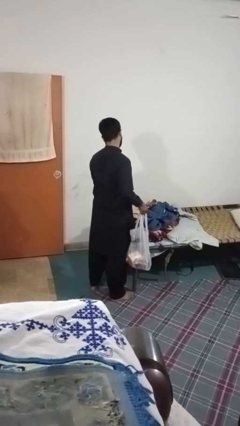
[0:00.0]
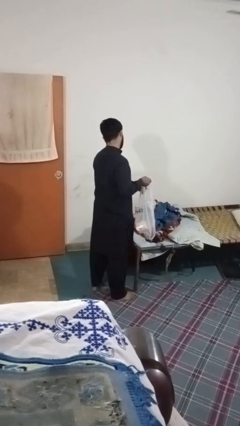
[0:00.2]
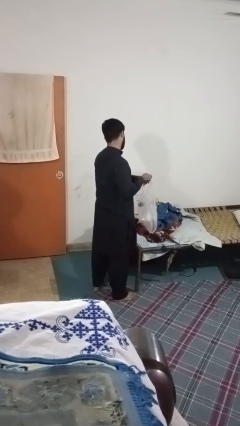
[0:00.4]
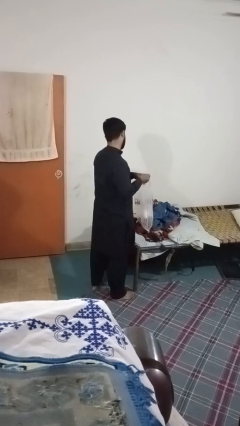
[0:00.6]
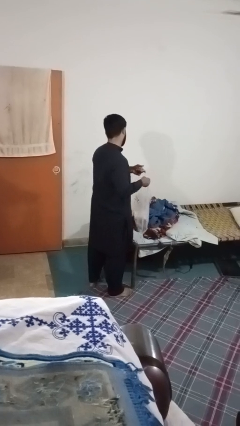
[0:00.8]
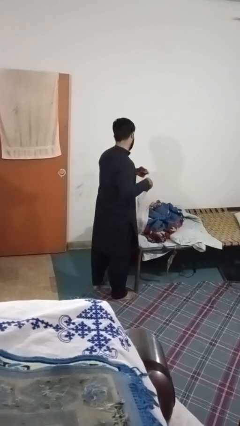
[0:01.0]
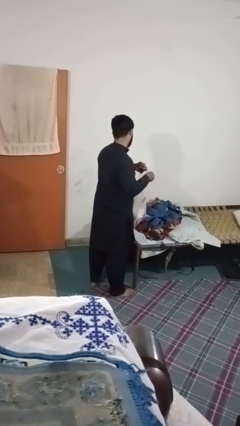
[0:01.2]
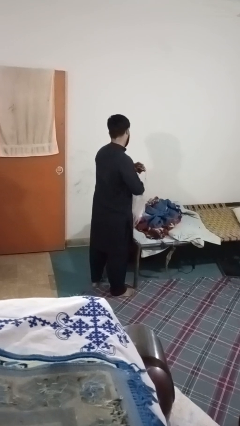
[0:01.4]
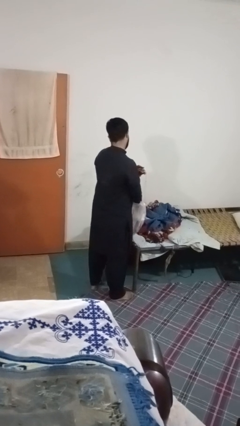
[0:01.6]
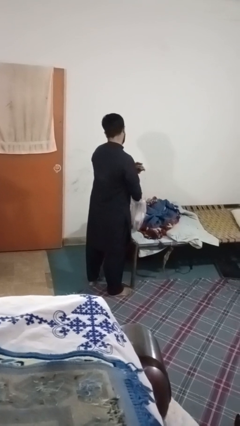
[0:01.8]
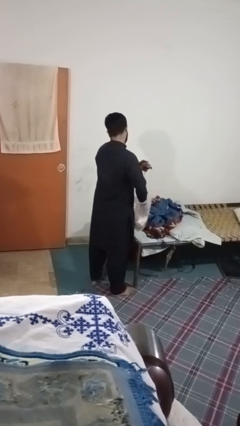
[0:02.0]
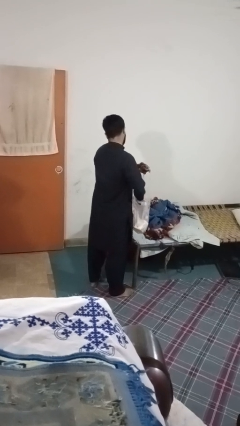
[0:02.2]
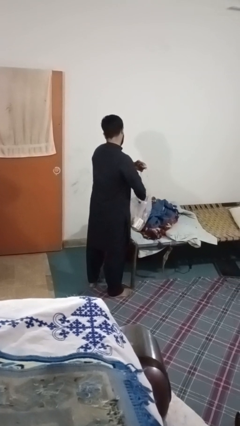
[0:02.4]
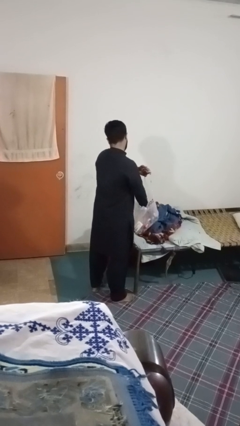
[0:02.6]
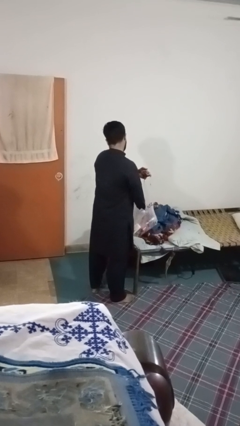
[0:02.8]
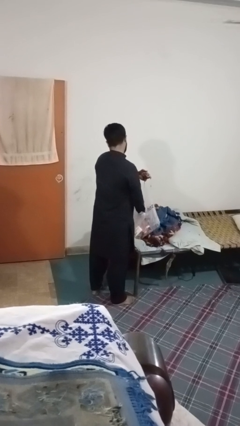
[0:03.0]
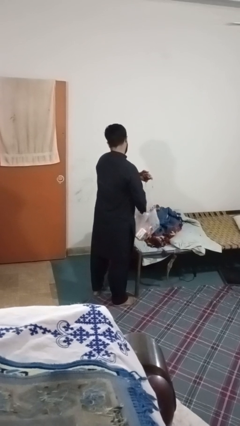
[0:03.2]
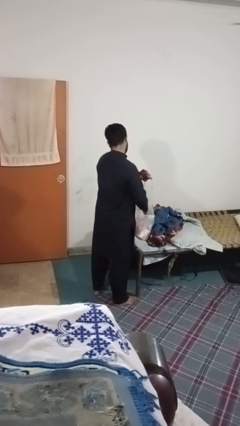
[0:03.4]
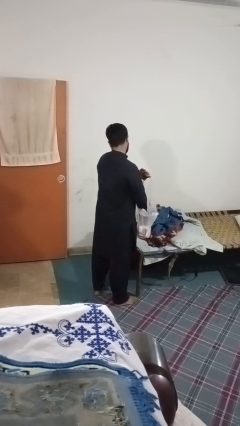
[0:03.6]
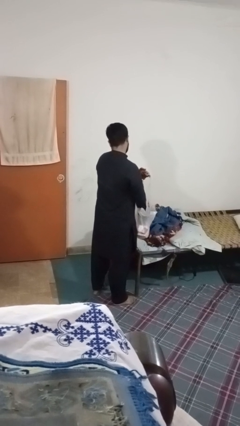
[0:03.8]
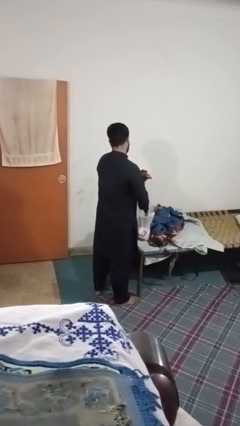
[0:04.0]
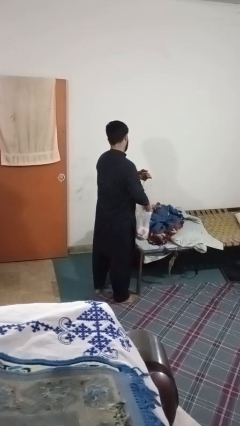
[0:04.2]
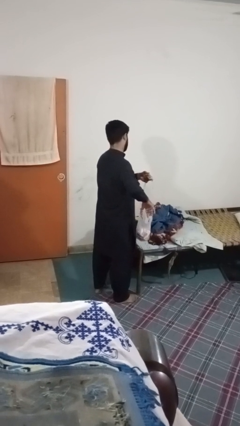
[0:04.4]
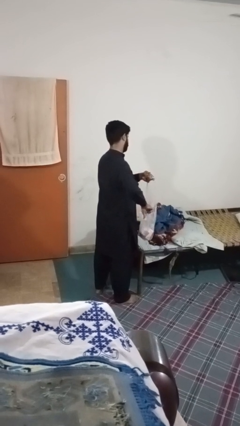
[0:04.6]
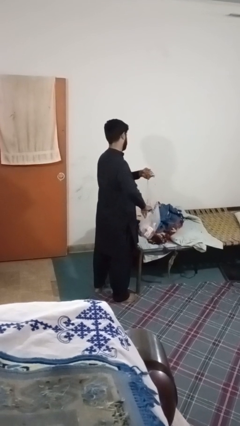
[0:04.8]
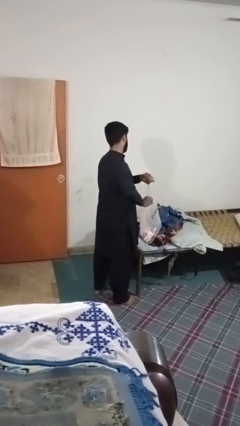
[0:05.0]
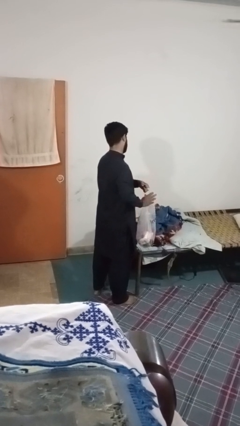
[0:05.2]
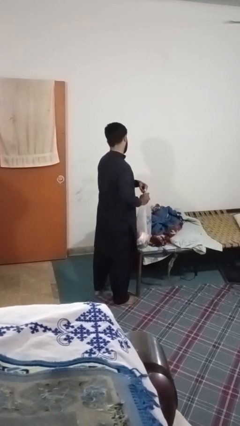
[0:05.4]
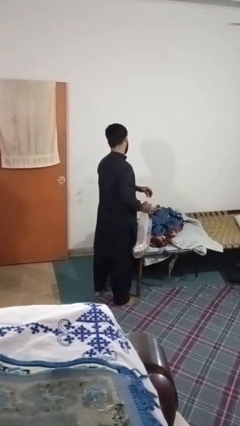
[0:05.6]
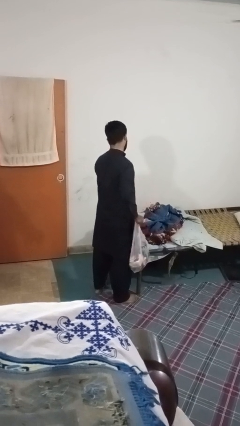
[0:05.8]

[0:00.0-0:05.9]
person searches in bag

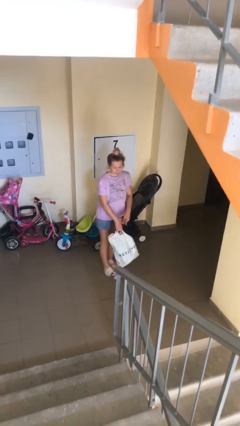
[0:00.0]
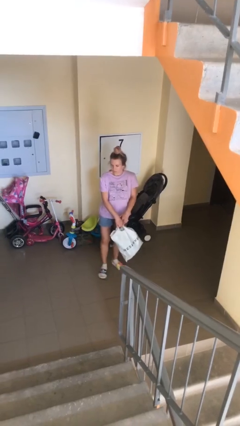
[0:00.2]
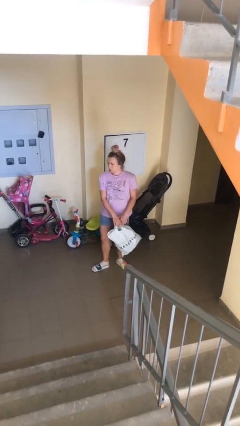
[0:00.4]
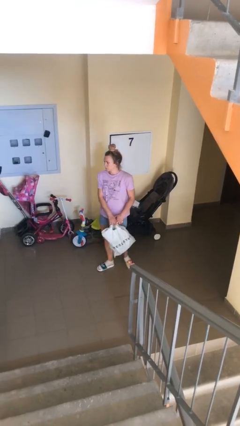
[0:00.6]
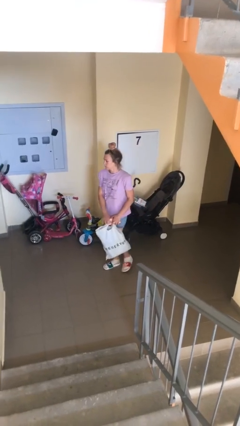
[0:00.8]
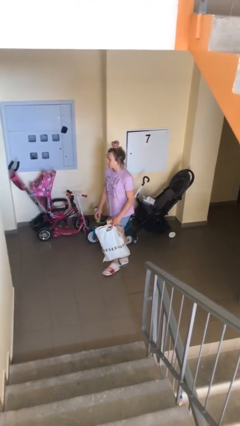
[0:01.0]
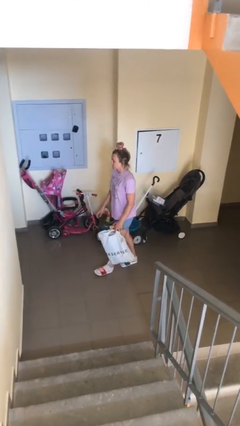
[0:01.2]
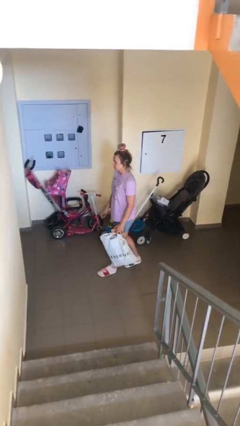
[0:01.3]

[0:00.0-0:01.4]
person carries groceries

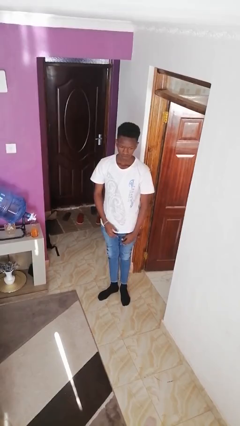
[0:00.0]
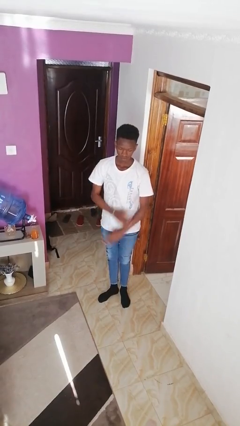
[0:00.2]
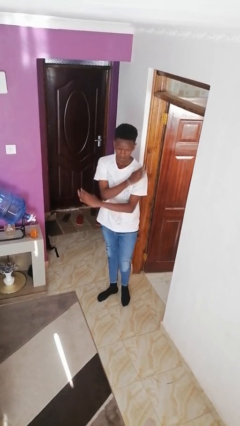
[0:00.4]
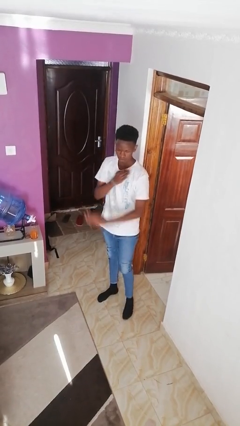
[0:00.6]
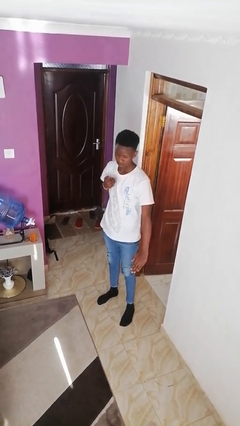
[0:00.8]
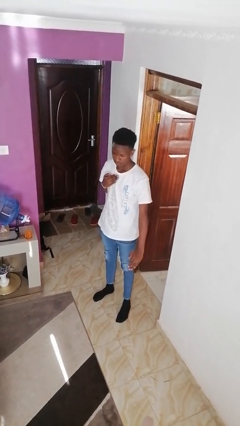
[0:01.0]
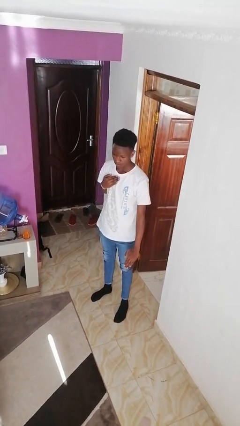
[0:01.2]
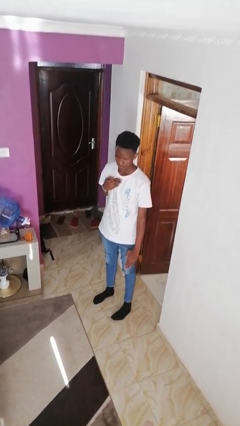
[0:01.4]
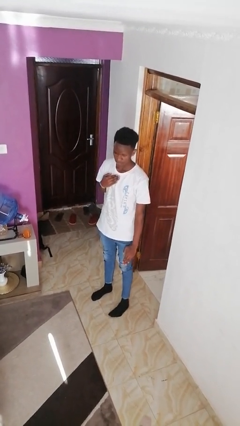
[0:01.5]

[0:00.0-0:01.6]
person karate chop

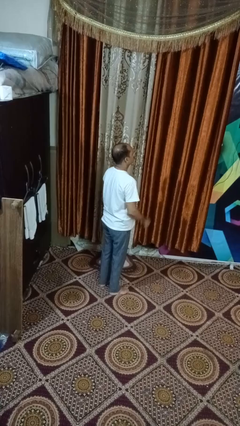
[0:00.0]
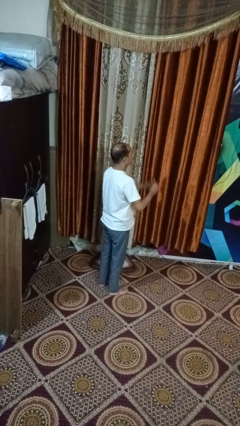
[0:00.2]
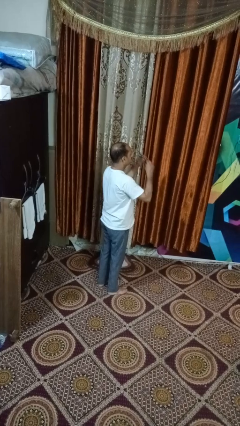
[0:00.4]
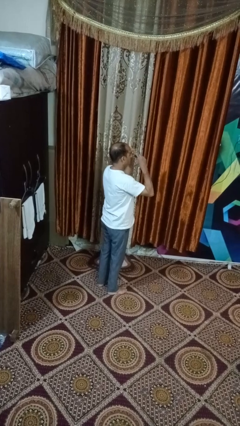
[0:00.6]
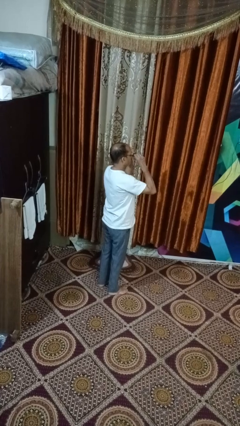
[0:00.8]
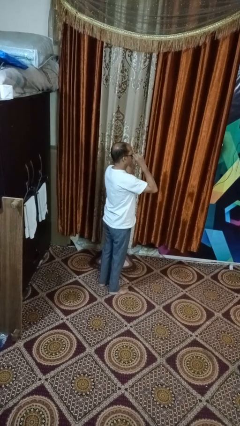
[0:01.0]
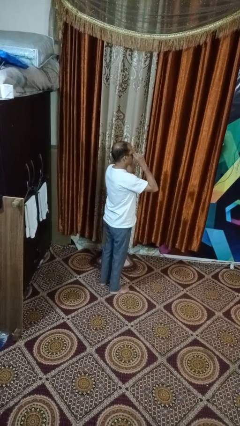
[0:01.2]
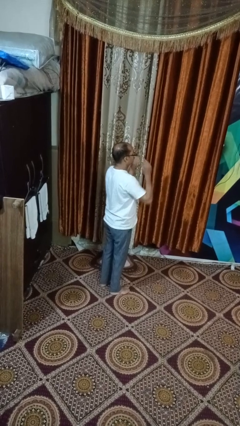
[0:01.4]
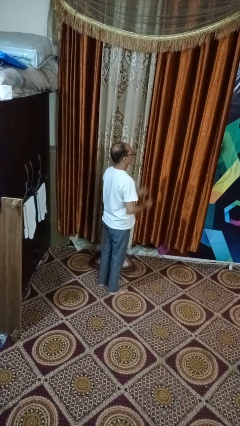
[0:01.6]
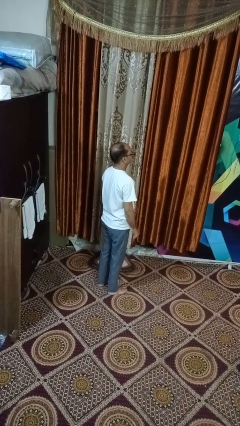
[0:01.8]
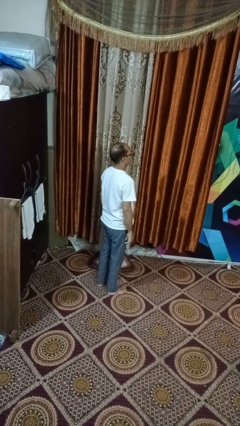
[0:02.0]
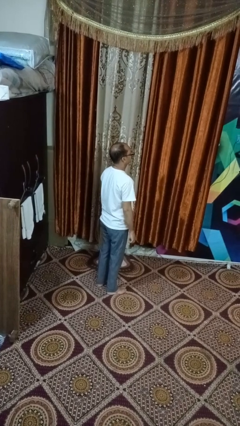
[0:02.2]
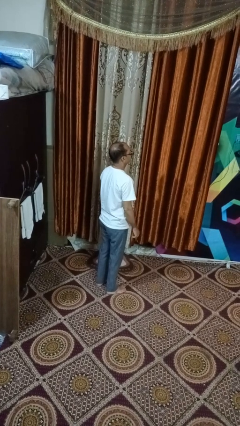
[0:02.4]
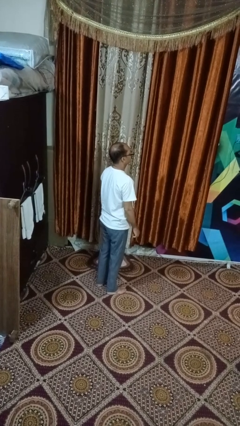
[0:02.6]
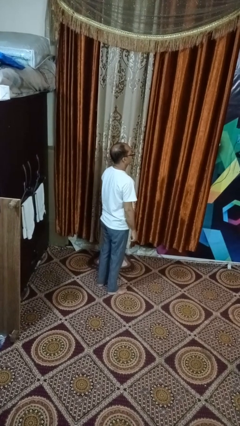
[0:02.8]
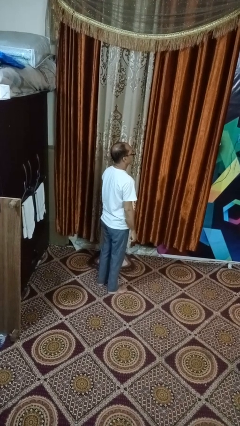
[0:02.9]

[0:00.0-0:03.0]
person puts on glasses

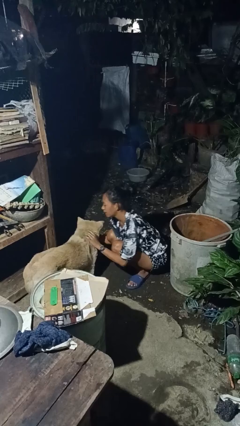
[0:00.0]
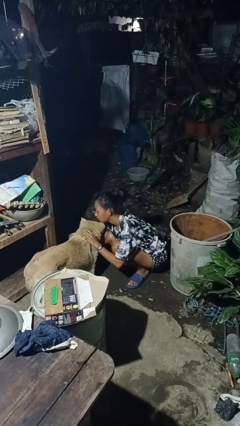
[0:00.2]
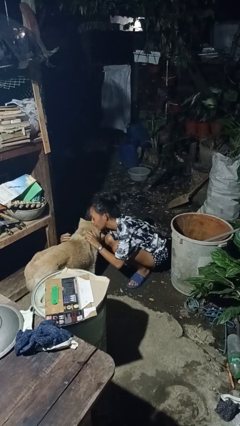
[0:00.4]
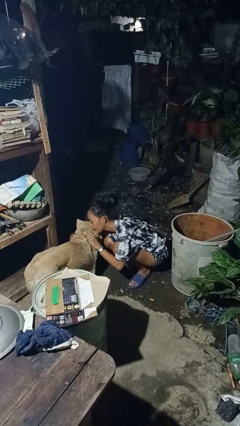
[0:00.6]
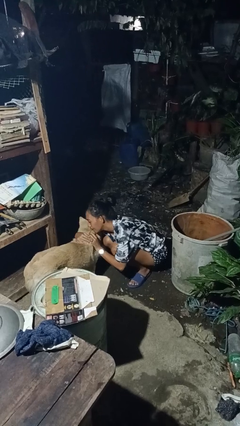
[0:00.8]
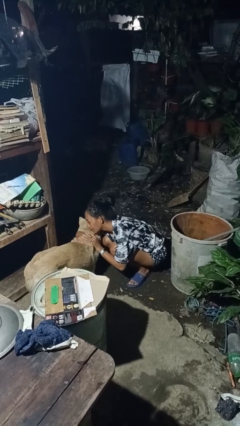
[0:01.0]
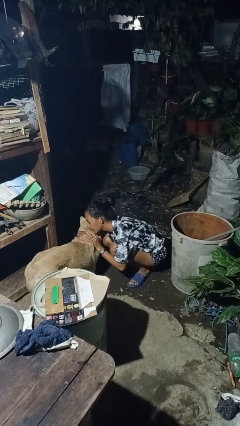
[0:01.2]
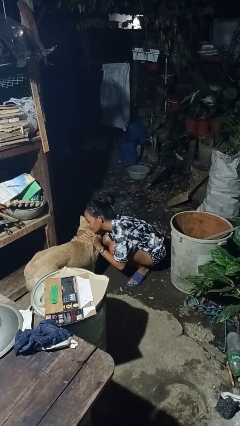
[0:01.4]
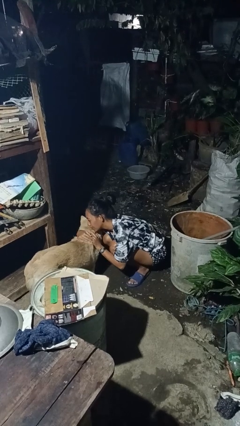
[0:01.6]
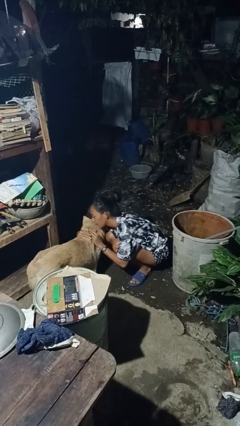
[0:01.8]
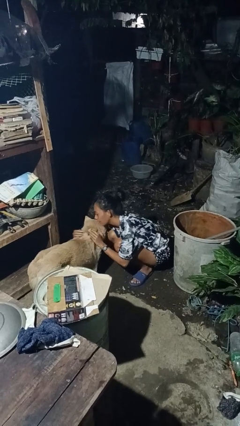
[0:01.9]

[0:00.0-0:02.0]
person hugs dog

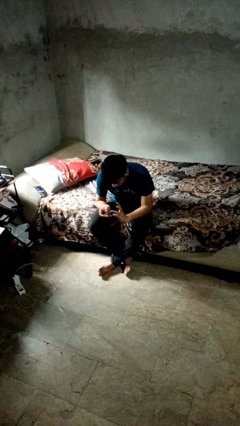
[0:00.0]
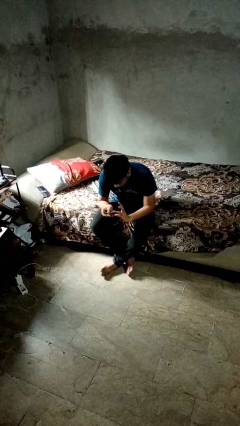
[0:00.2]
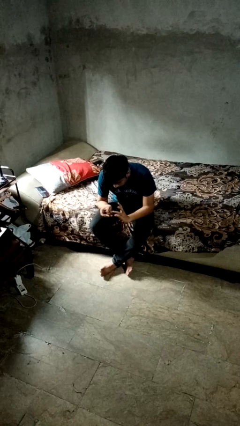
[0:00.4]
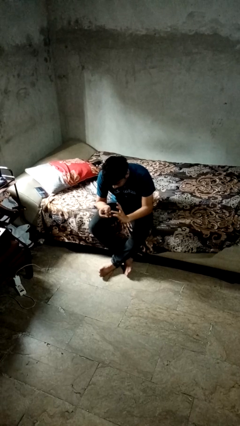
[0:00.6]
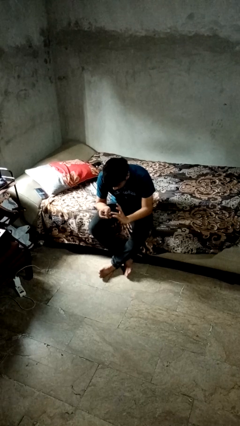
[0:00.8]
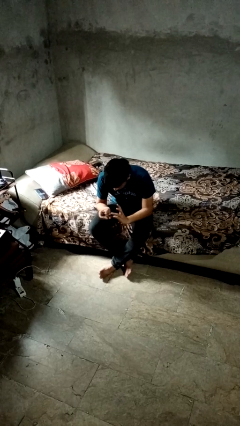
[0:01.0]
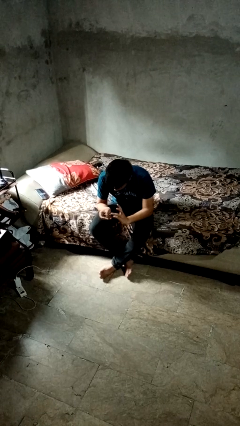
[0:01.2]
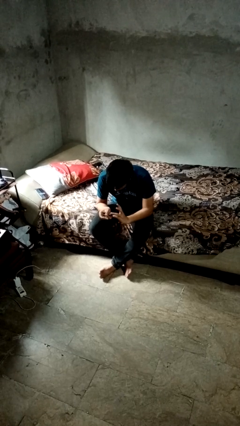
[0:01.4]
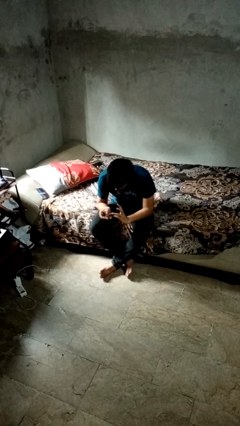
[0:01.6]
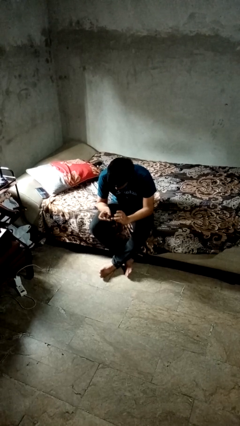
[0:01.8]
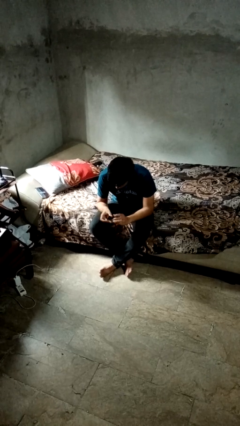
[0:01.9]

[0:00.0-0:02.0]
person clips fingernails

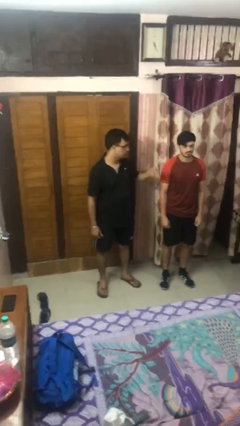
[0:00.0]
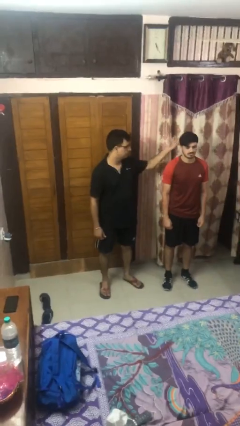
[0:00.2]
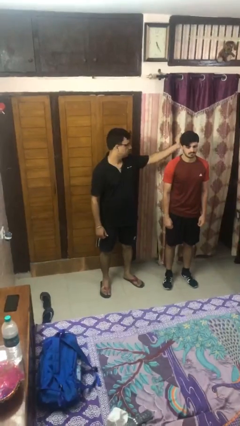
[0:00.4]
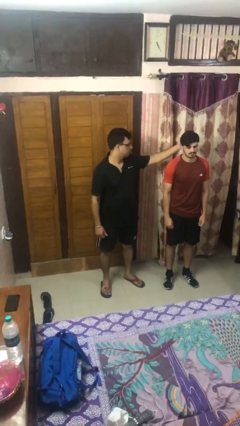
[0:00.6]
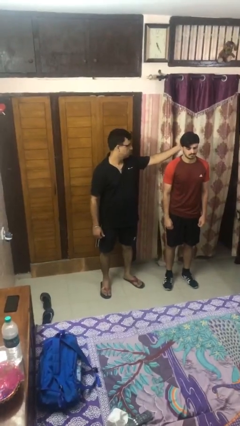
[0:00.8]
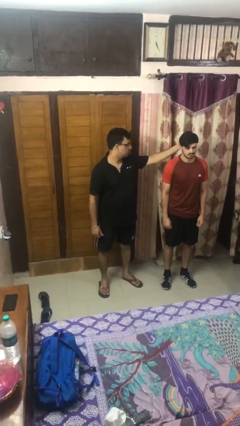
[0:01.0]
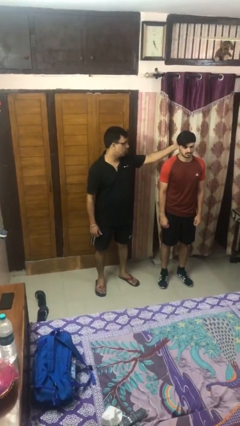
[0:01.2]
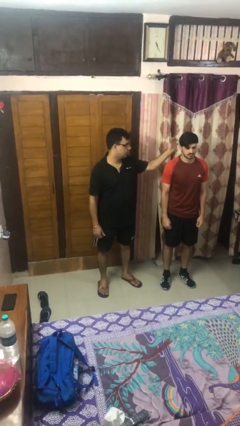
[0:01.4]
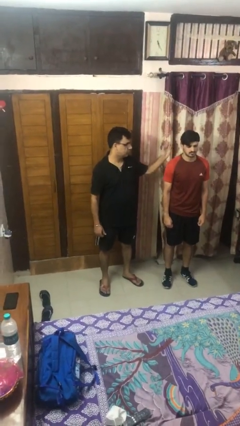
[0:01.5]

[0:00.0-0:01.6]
person grabs person by hair
